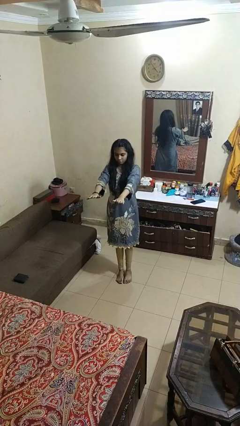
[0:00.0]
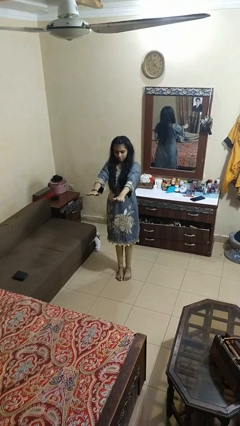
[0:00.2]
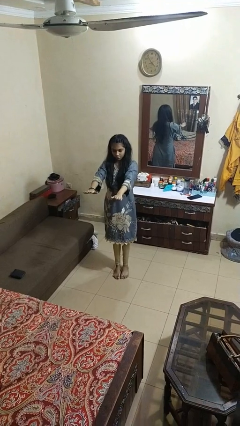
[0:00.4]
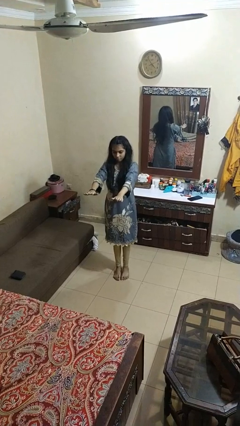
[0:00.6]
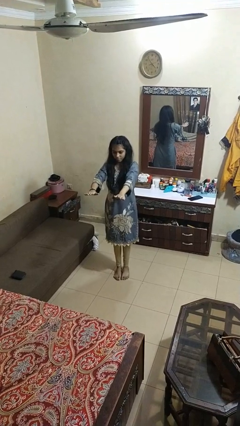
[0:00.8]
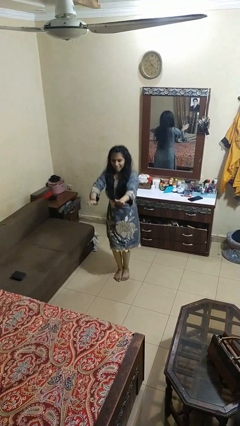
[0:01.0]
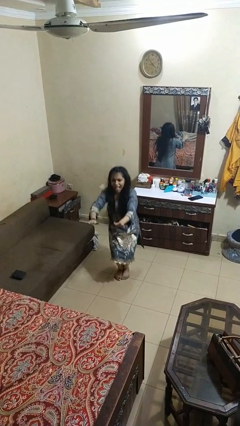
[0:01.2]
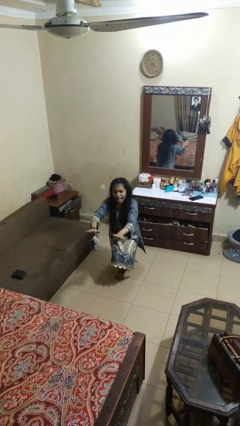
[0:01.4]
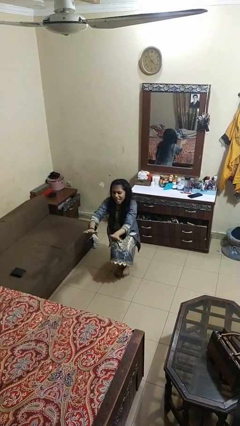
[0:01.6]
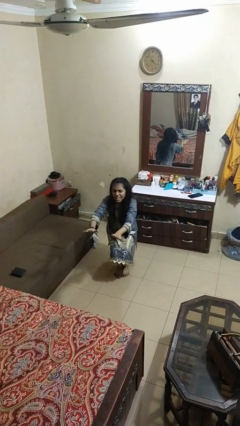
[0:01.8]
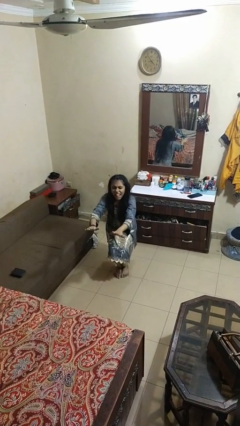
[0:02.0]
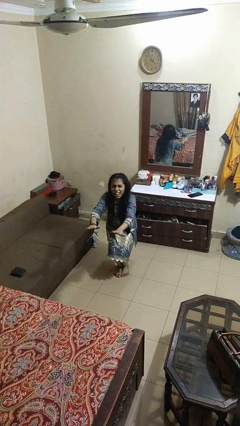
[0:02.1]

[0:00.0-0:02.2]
person squats

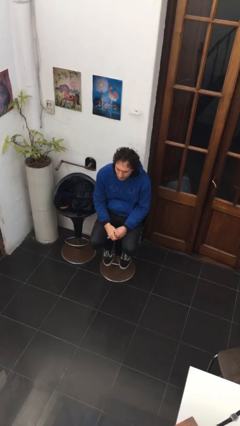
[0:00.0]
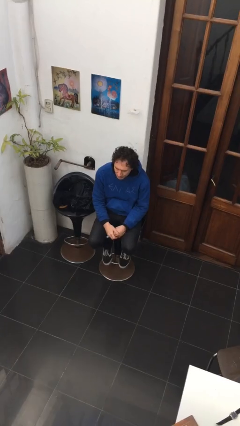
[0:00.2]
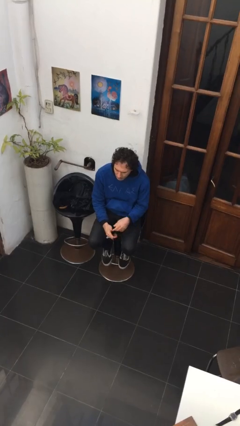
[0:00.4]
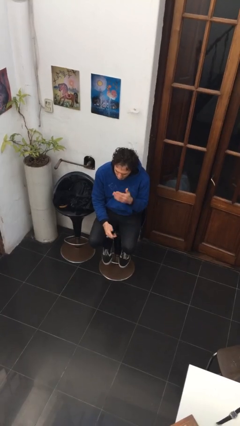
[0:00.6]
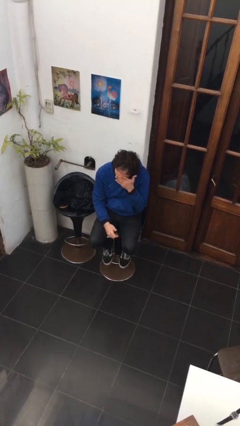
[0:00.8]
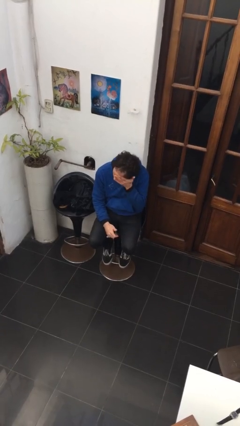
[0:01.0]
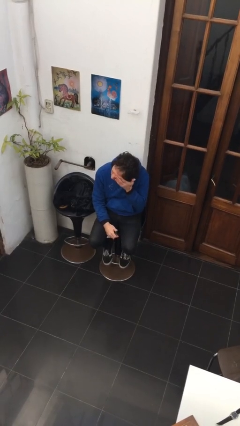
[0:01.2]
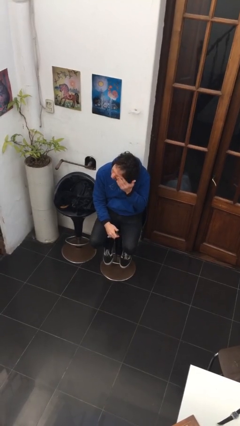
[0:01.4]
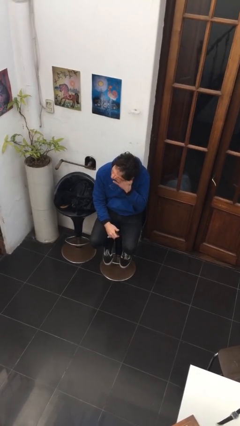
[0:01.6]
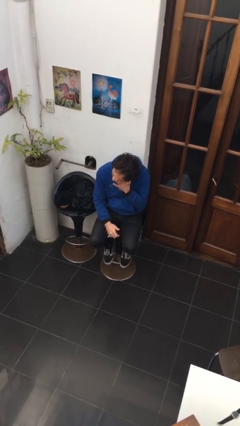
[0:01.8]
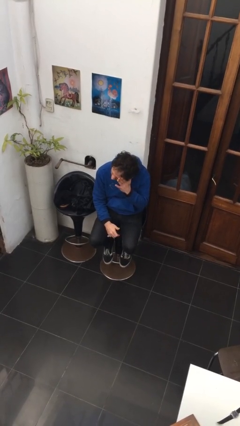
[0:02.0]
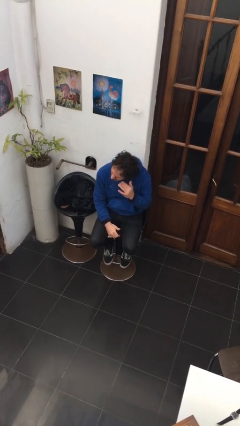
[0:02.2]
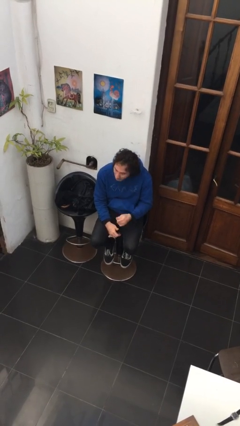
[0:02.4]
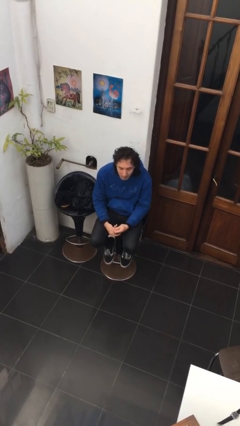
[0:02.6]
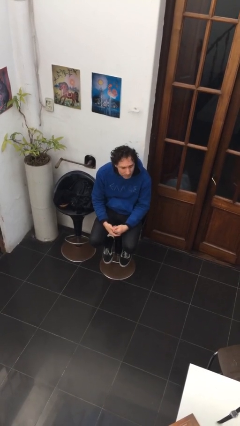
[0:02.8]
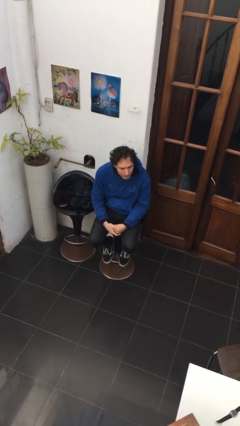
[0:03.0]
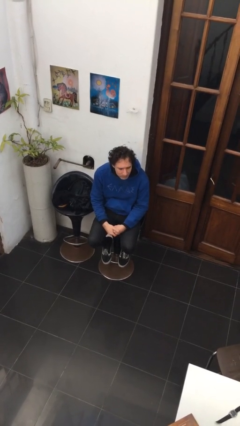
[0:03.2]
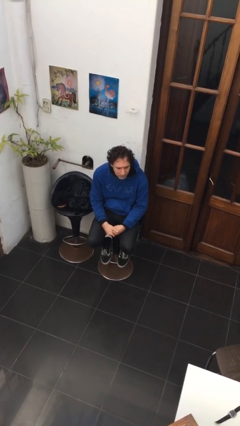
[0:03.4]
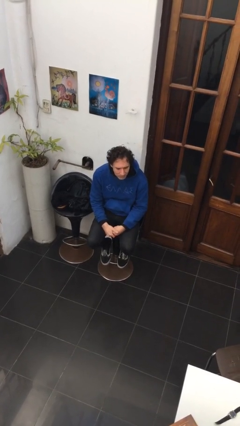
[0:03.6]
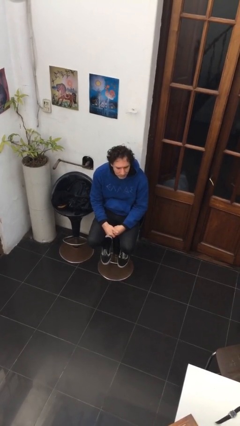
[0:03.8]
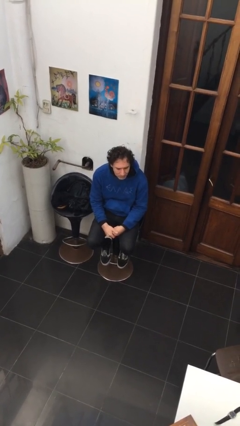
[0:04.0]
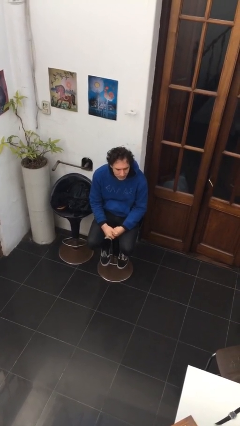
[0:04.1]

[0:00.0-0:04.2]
person scratches face

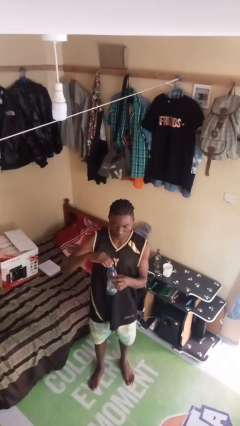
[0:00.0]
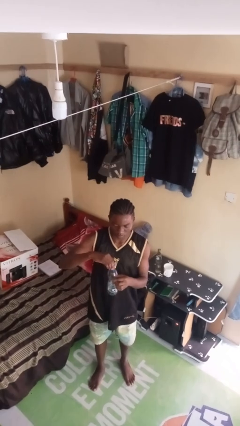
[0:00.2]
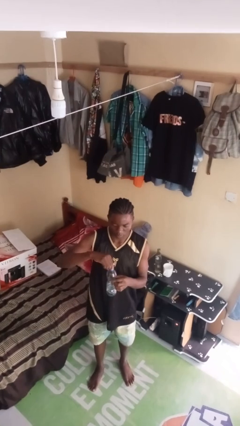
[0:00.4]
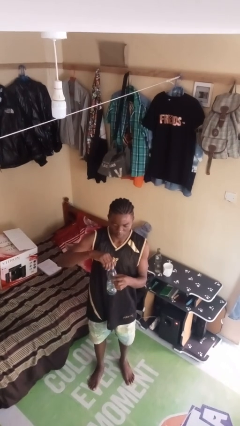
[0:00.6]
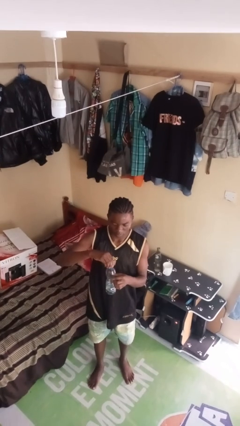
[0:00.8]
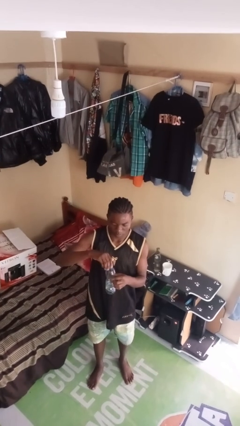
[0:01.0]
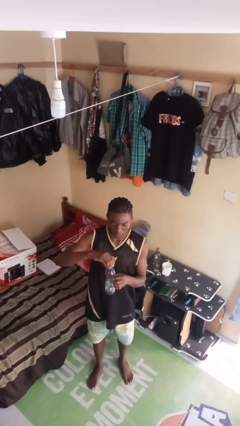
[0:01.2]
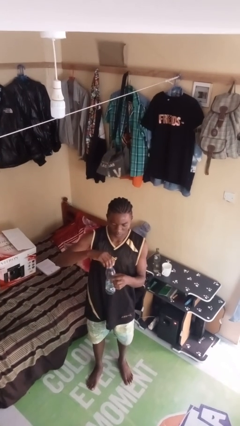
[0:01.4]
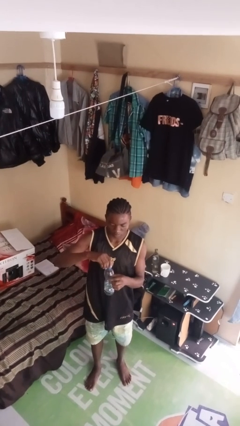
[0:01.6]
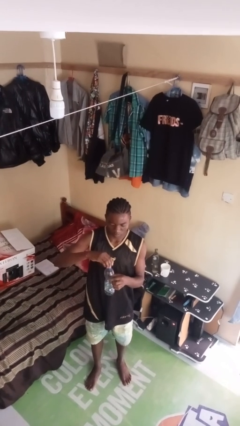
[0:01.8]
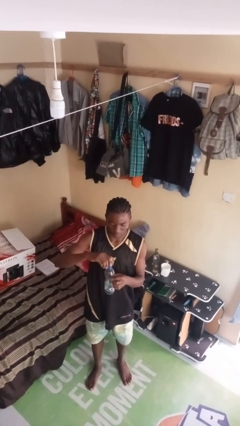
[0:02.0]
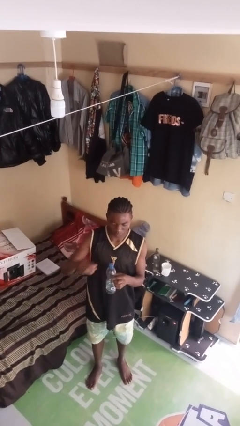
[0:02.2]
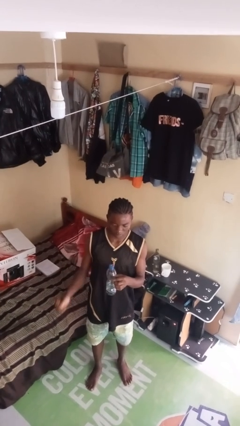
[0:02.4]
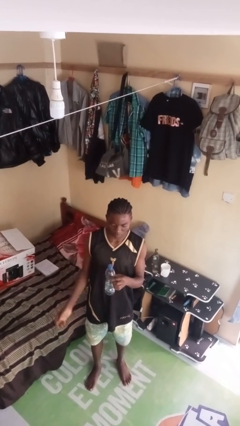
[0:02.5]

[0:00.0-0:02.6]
person screws lid to bottle

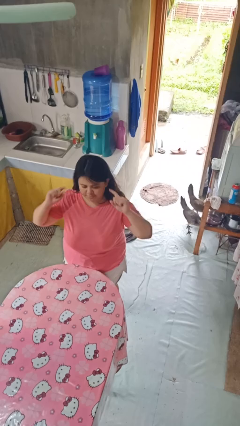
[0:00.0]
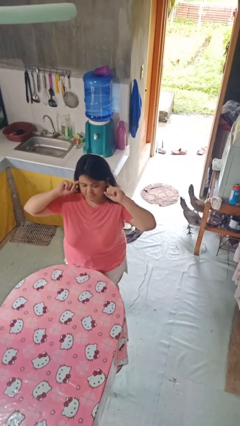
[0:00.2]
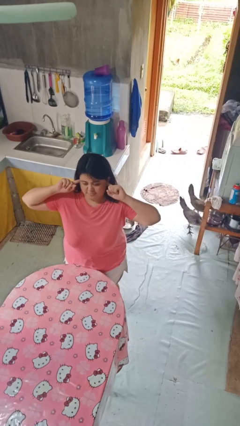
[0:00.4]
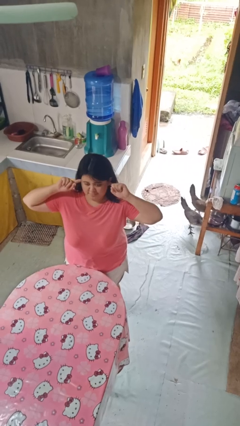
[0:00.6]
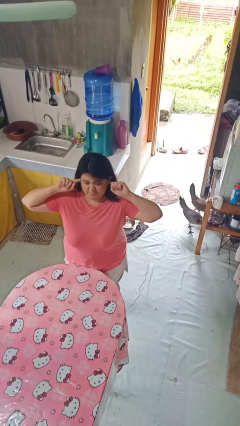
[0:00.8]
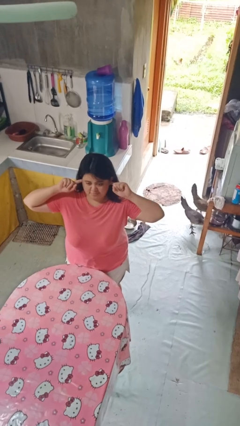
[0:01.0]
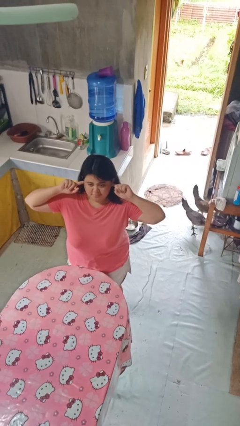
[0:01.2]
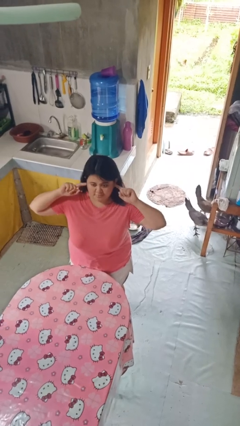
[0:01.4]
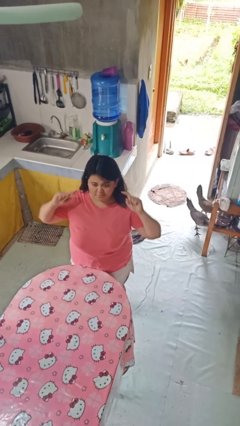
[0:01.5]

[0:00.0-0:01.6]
person puts fingers in ear

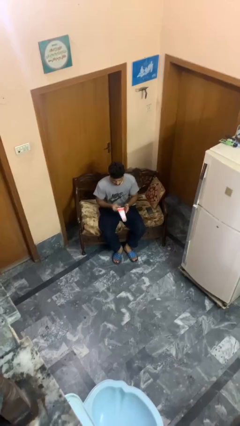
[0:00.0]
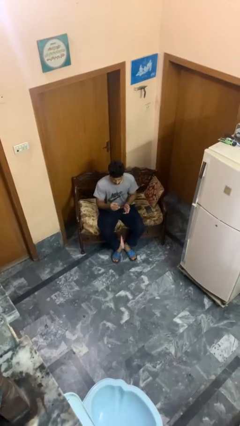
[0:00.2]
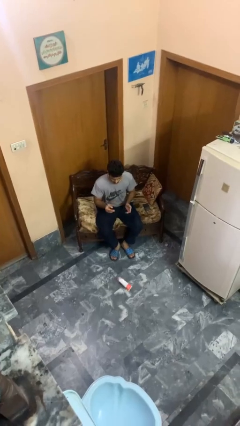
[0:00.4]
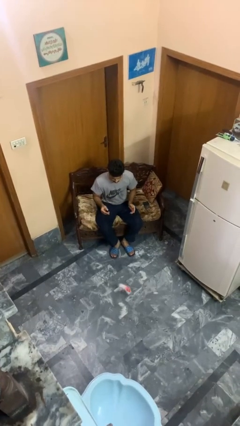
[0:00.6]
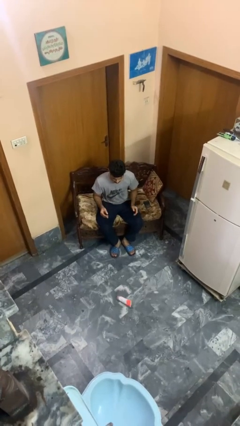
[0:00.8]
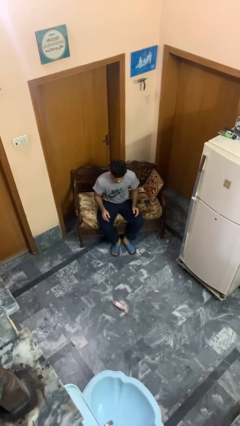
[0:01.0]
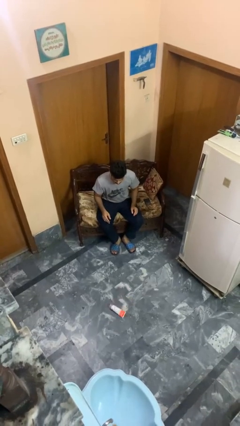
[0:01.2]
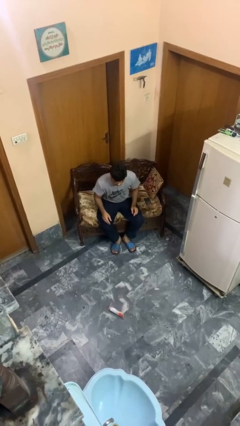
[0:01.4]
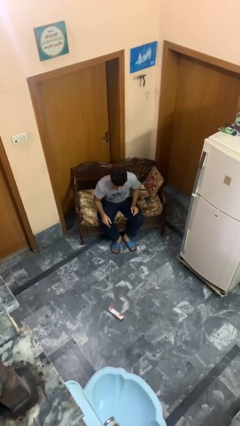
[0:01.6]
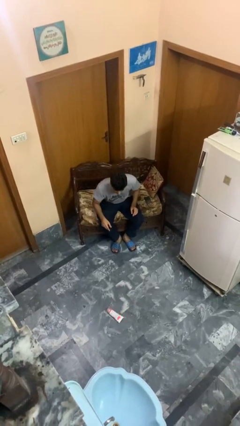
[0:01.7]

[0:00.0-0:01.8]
person drops object

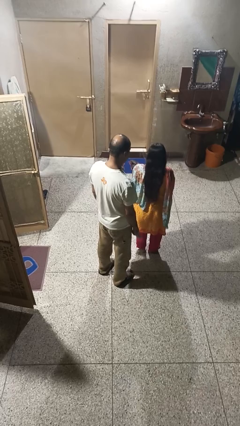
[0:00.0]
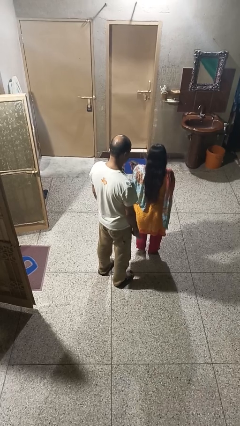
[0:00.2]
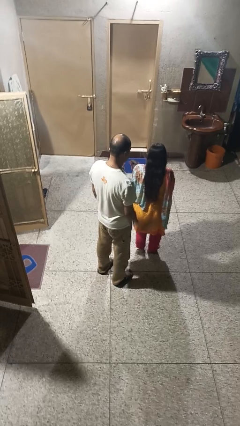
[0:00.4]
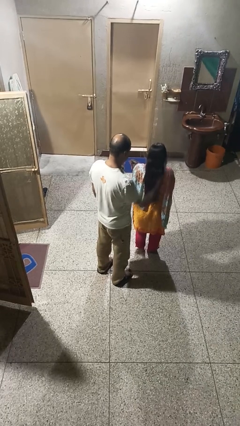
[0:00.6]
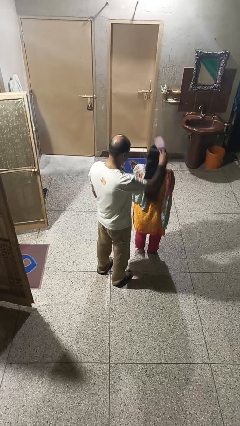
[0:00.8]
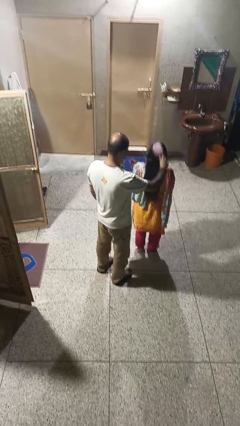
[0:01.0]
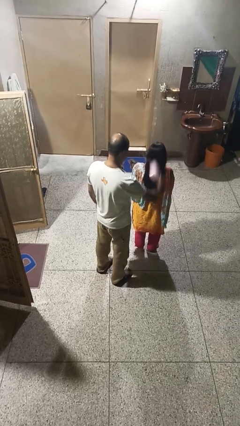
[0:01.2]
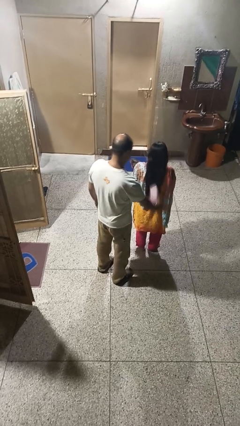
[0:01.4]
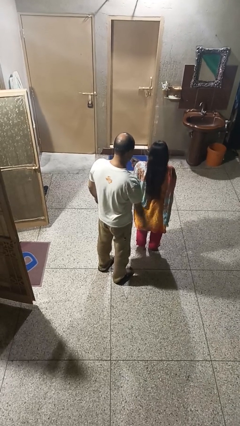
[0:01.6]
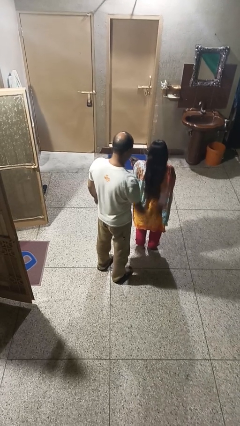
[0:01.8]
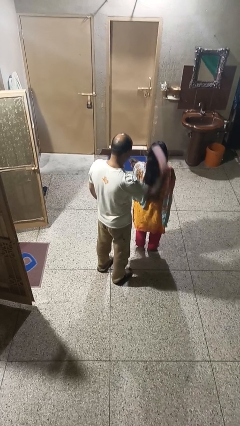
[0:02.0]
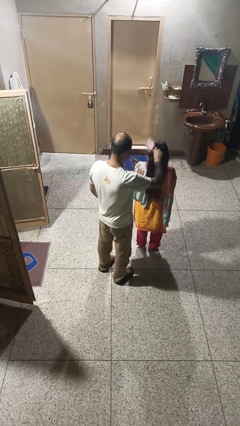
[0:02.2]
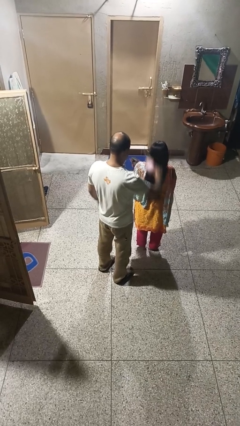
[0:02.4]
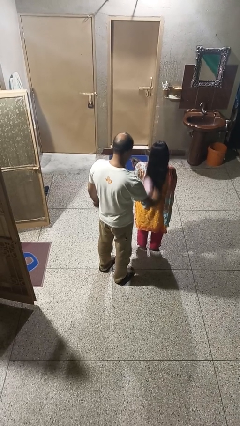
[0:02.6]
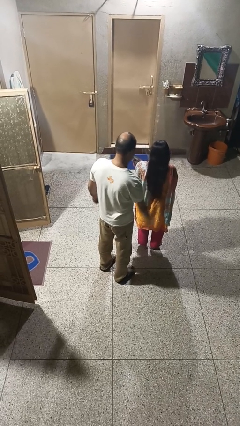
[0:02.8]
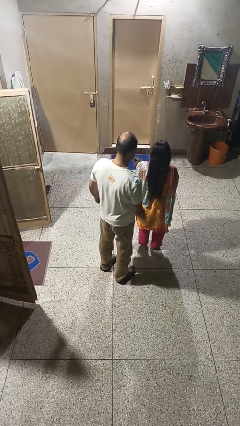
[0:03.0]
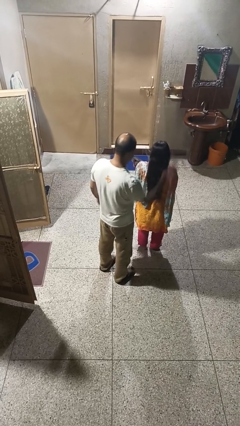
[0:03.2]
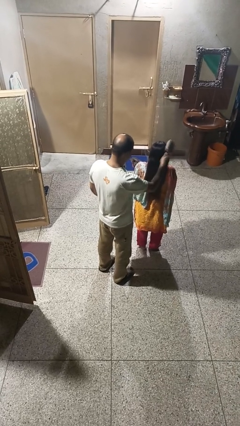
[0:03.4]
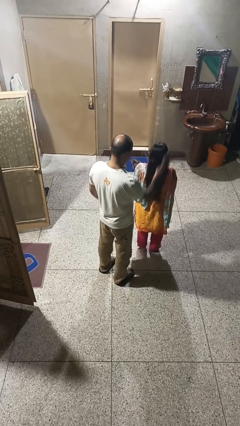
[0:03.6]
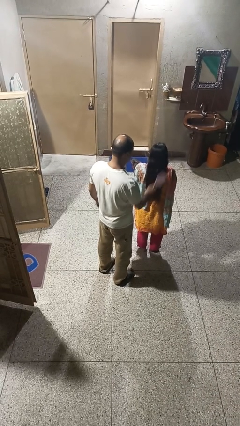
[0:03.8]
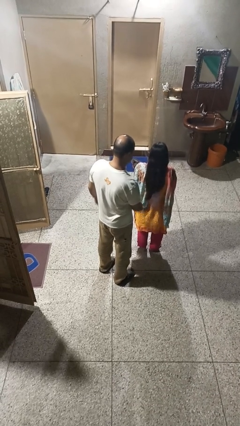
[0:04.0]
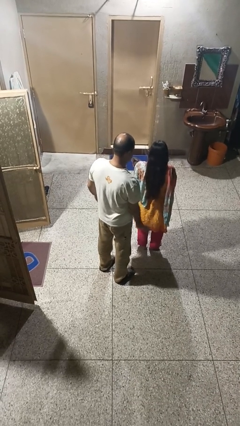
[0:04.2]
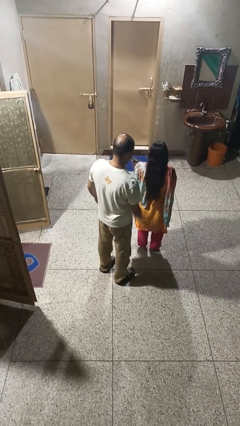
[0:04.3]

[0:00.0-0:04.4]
person brushes hair of person
